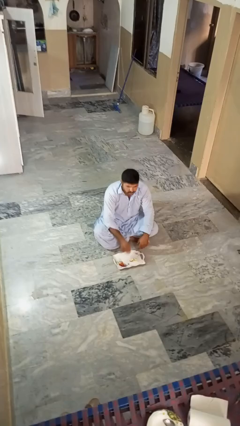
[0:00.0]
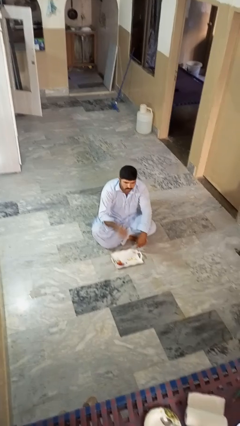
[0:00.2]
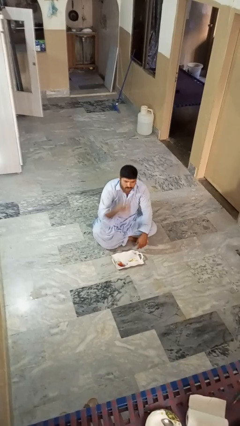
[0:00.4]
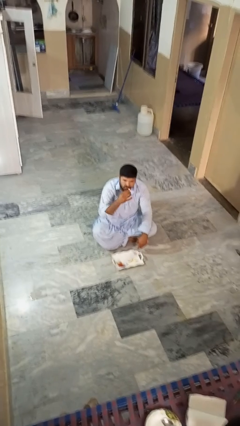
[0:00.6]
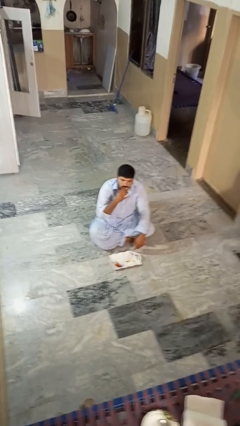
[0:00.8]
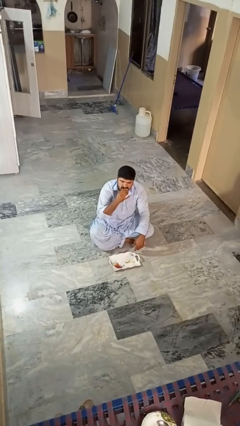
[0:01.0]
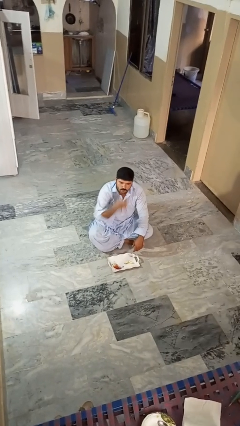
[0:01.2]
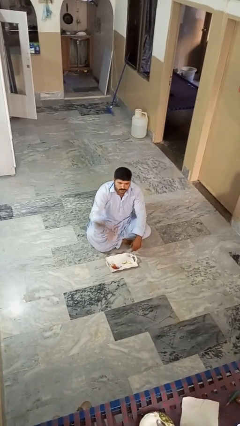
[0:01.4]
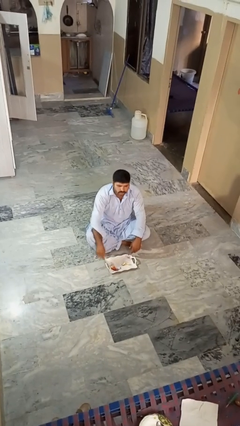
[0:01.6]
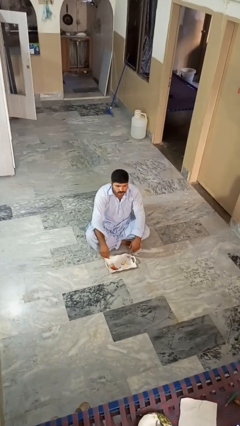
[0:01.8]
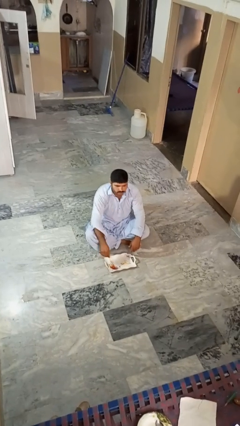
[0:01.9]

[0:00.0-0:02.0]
person eats apple

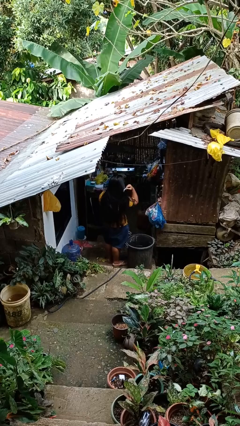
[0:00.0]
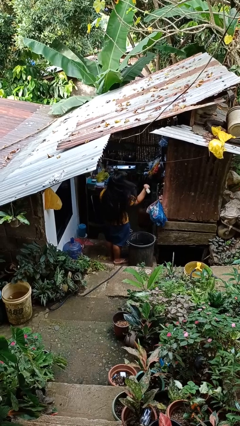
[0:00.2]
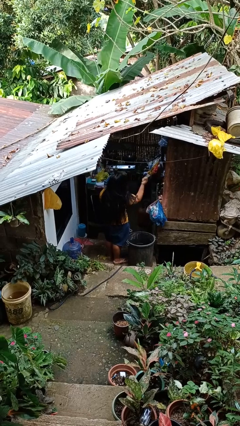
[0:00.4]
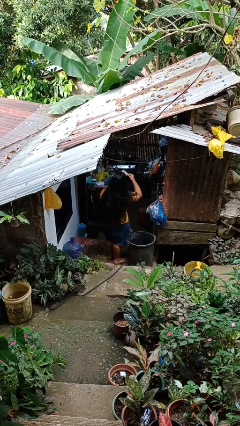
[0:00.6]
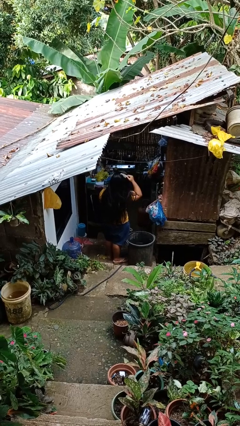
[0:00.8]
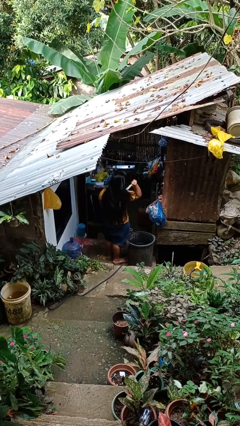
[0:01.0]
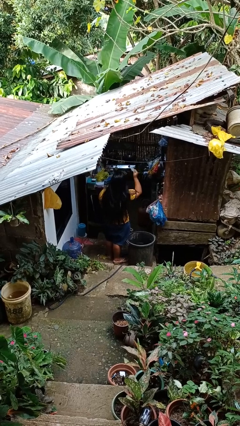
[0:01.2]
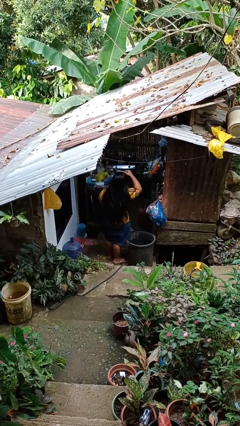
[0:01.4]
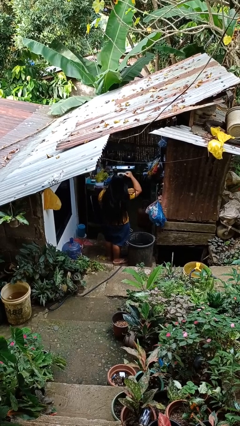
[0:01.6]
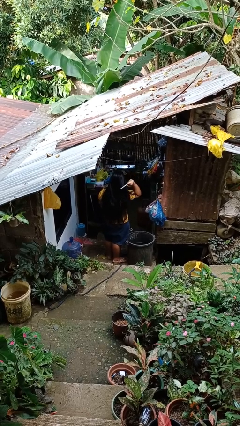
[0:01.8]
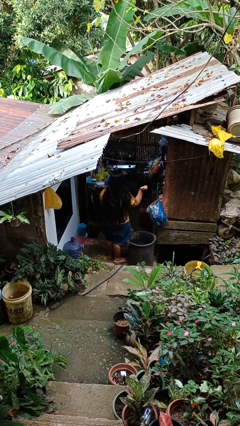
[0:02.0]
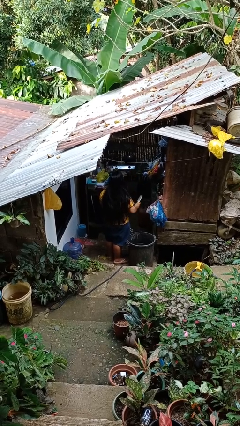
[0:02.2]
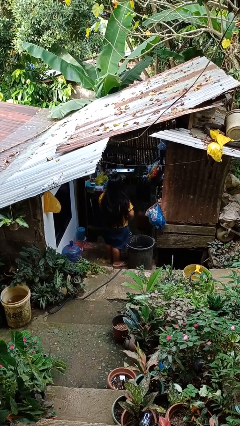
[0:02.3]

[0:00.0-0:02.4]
person brushes hair

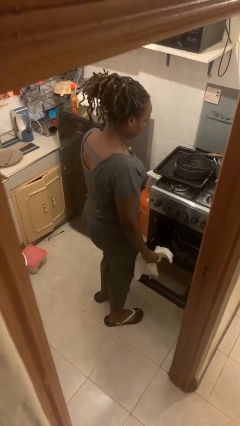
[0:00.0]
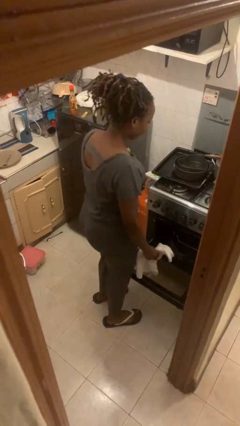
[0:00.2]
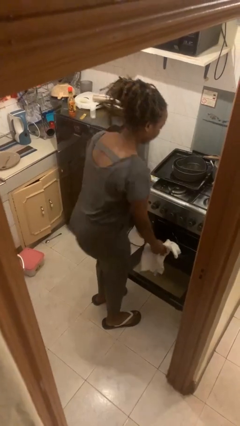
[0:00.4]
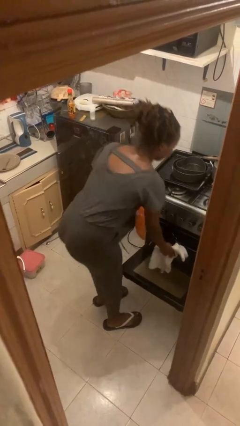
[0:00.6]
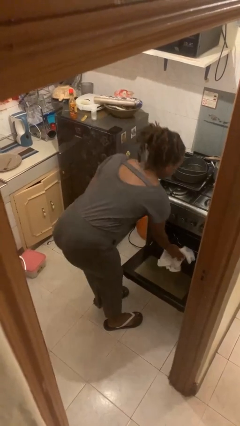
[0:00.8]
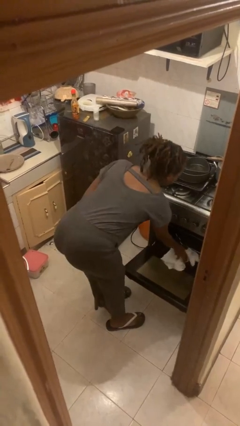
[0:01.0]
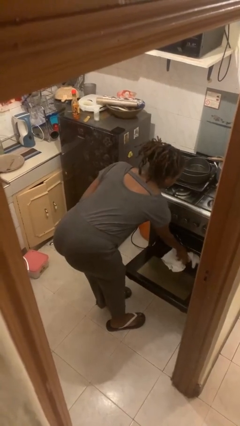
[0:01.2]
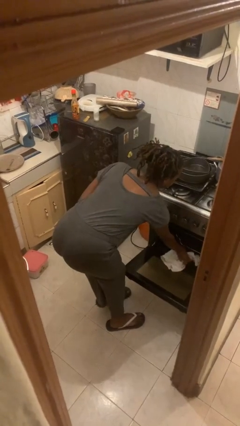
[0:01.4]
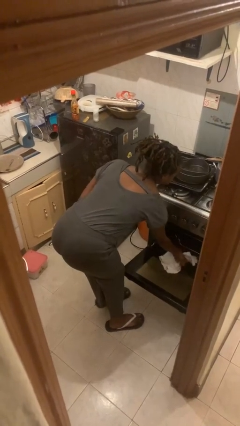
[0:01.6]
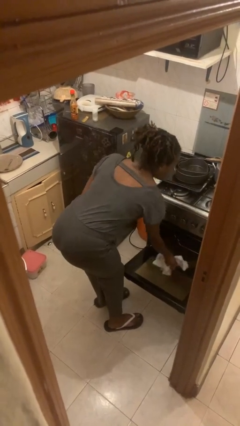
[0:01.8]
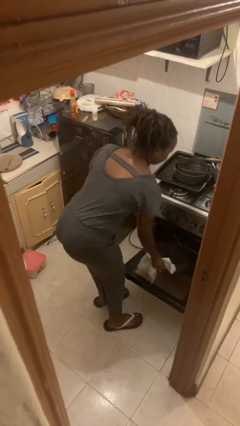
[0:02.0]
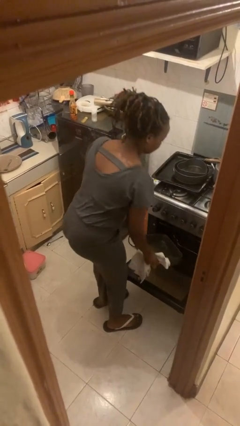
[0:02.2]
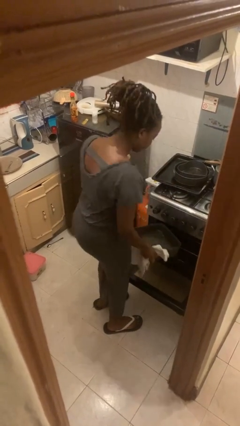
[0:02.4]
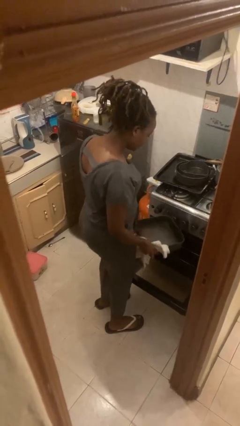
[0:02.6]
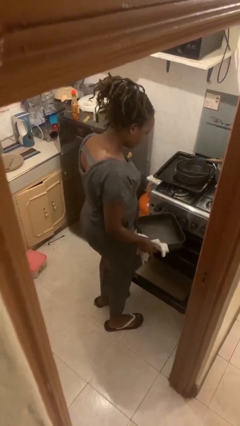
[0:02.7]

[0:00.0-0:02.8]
person takes object from oven

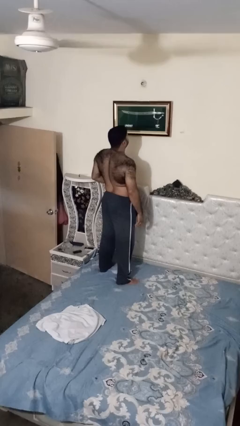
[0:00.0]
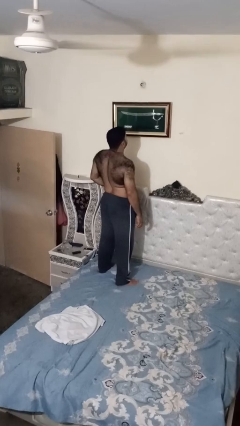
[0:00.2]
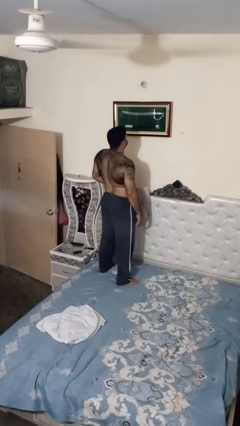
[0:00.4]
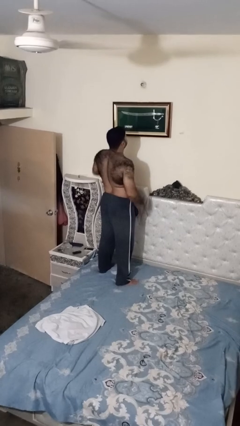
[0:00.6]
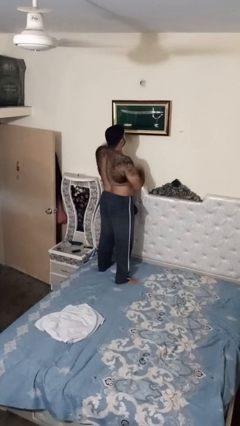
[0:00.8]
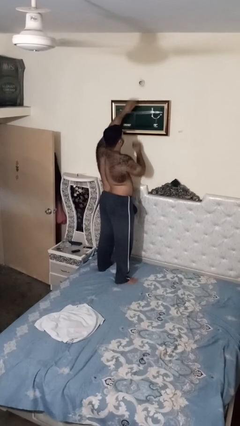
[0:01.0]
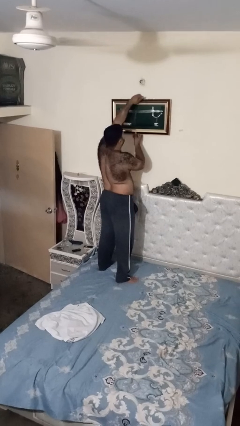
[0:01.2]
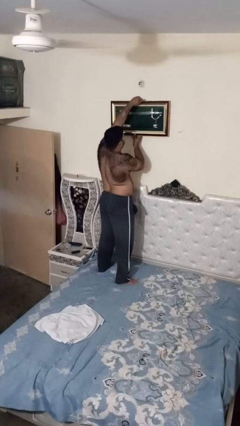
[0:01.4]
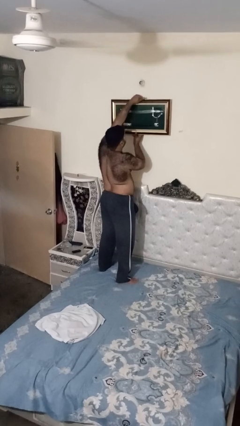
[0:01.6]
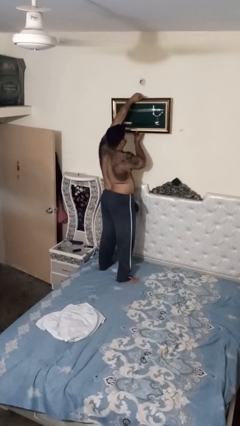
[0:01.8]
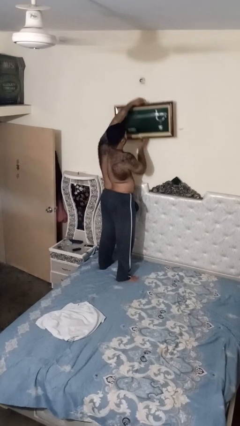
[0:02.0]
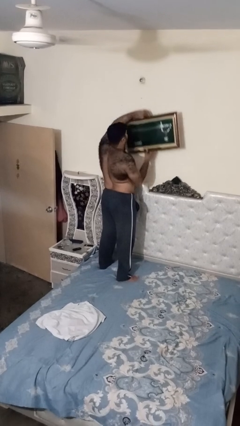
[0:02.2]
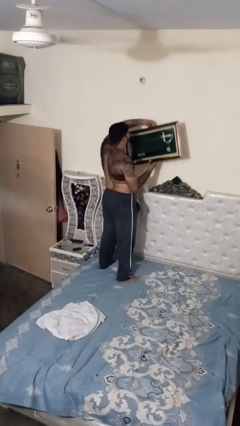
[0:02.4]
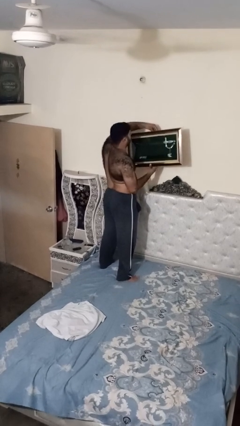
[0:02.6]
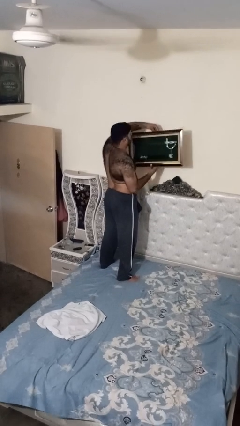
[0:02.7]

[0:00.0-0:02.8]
person takes down picture frame

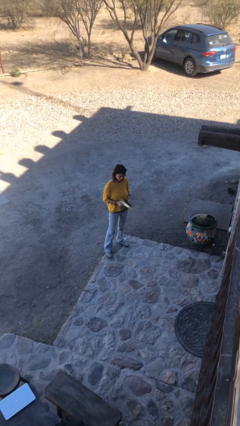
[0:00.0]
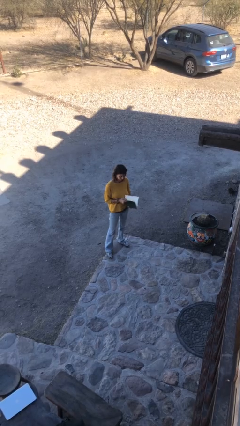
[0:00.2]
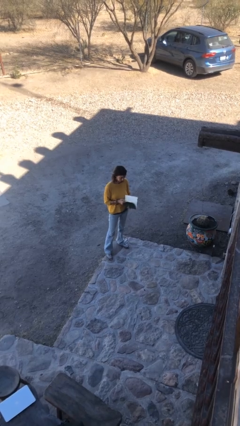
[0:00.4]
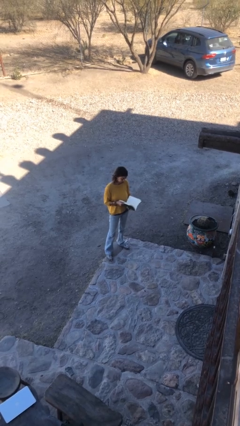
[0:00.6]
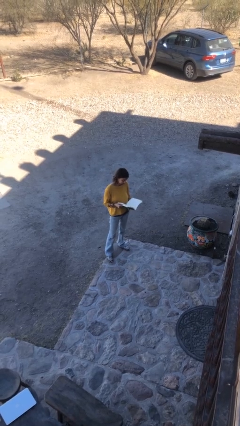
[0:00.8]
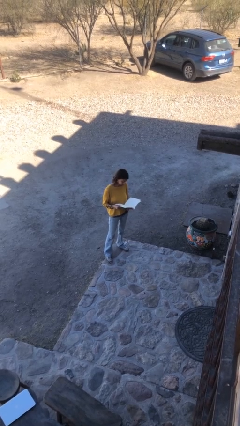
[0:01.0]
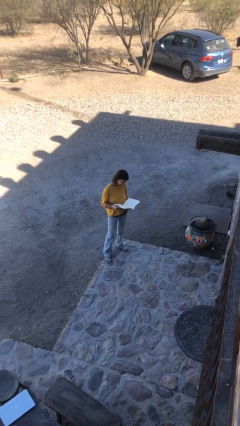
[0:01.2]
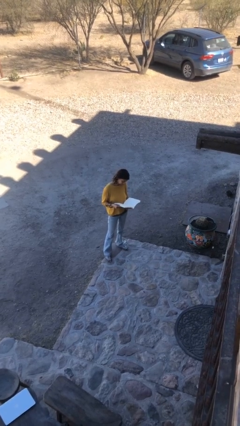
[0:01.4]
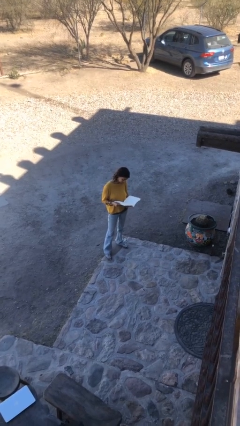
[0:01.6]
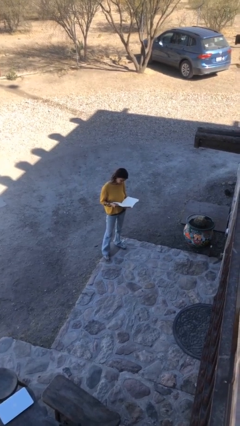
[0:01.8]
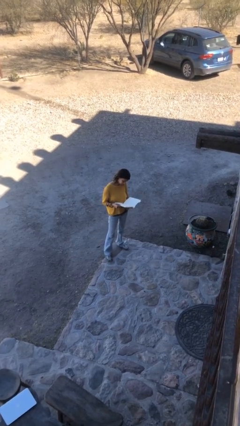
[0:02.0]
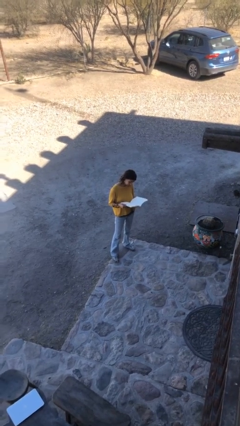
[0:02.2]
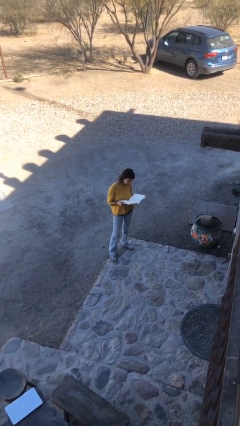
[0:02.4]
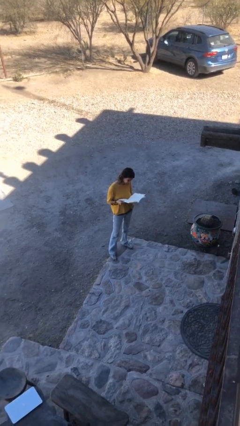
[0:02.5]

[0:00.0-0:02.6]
person reads document

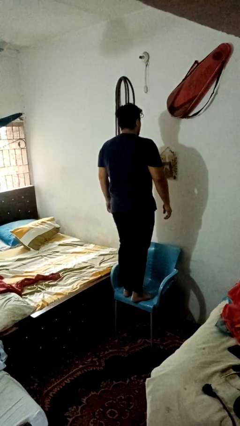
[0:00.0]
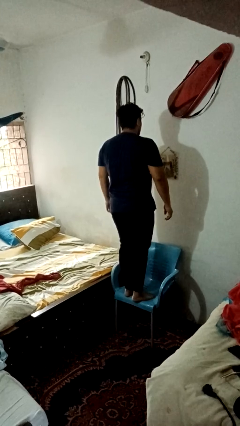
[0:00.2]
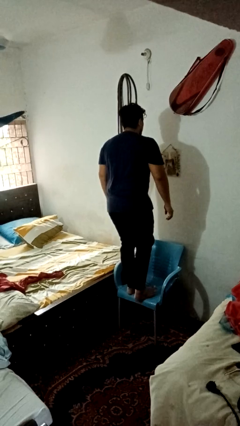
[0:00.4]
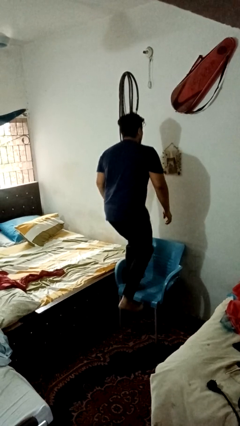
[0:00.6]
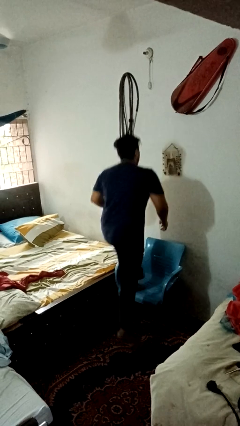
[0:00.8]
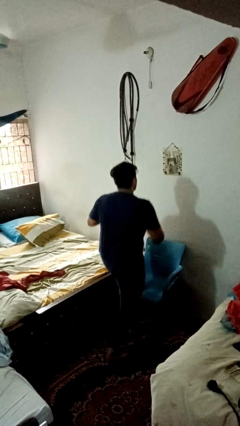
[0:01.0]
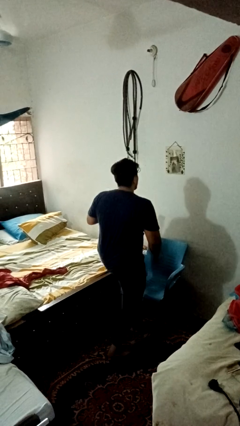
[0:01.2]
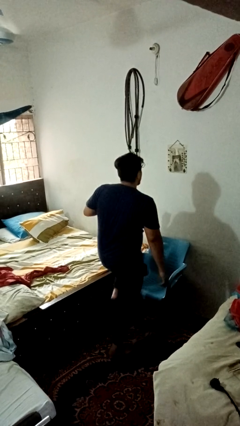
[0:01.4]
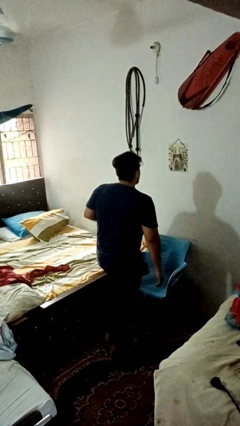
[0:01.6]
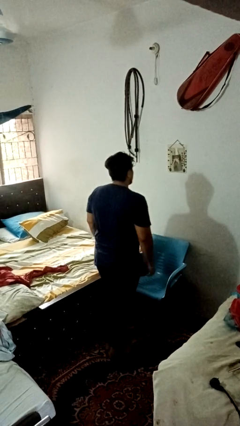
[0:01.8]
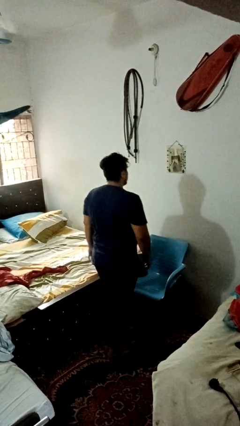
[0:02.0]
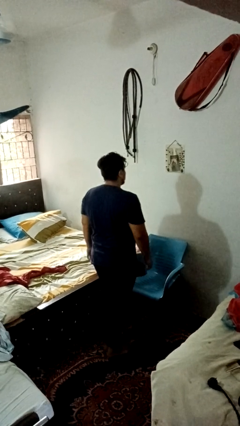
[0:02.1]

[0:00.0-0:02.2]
person climbs off chair

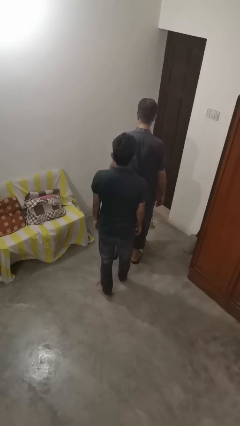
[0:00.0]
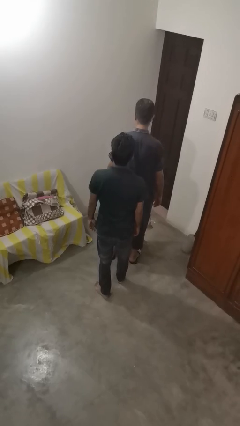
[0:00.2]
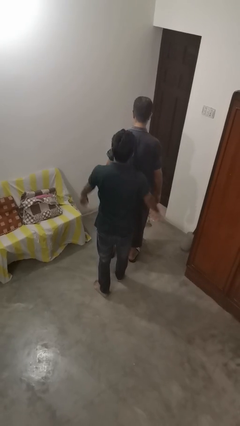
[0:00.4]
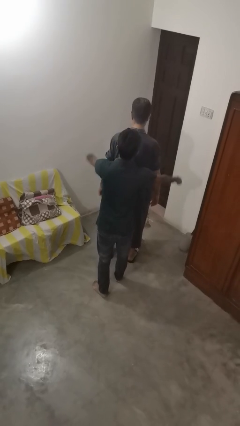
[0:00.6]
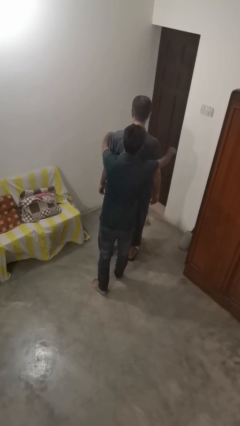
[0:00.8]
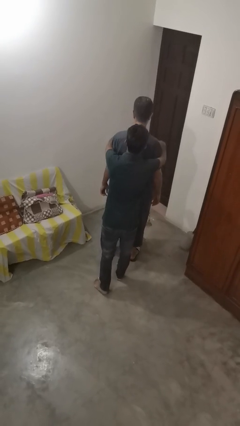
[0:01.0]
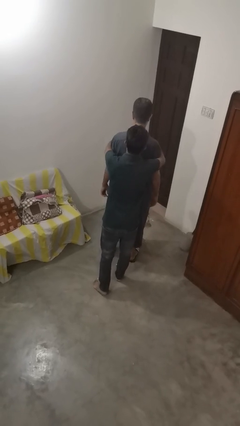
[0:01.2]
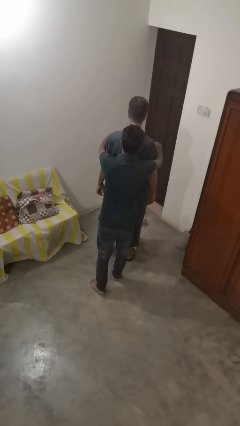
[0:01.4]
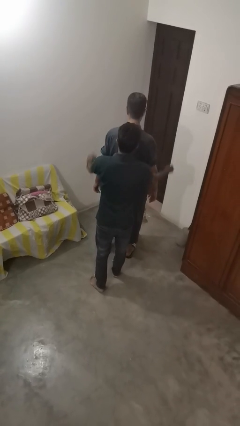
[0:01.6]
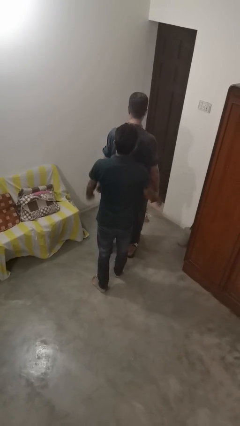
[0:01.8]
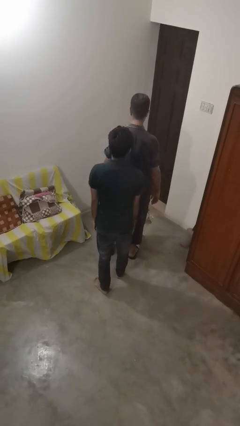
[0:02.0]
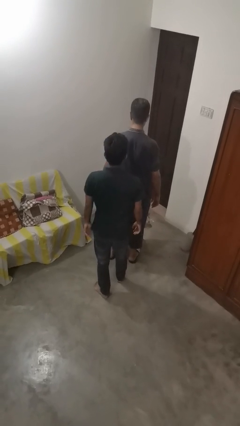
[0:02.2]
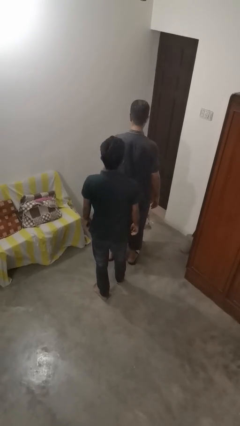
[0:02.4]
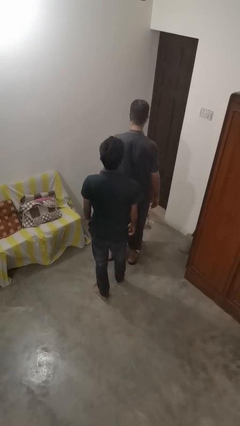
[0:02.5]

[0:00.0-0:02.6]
person hugs person from behind

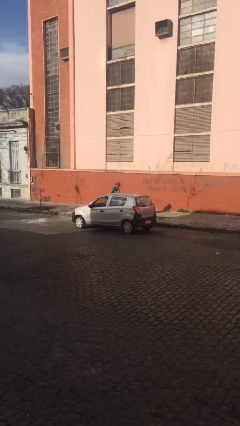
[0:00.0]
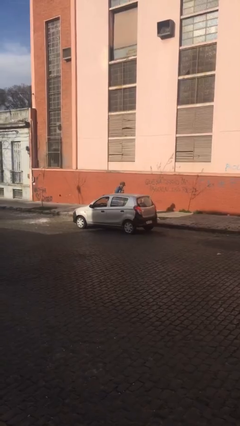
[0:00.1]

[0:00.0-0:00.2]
car drops off person
